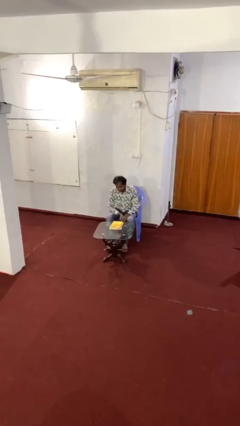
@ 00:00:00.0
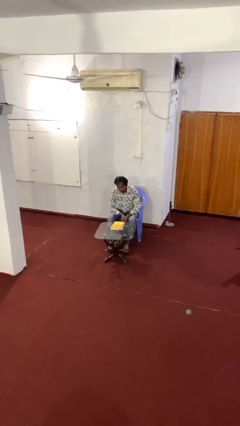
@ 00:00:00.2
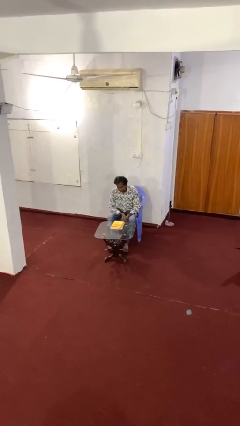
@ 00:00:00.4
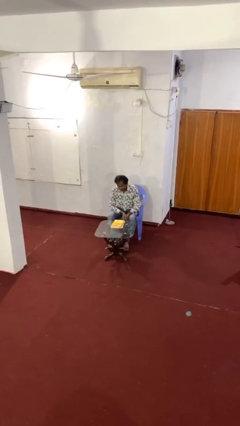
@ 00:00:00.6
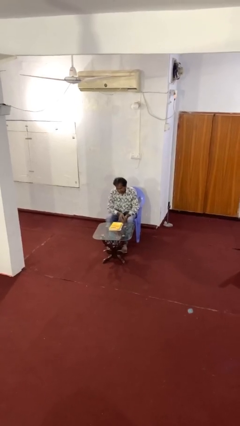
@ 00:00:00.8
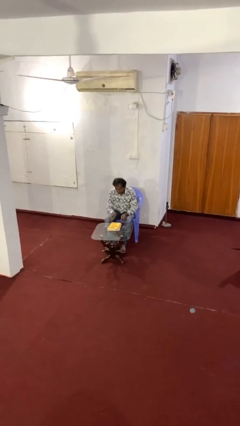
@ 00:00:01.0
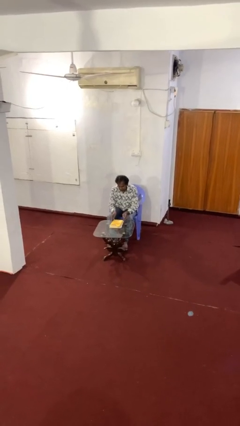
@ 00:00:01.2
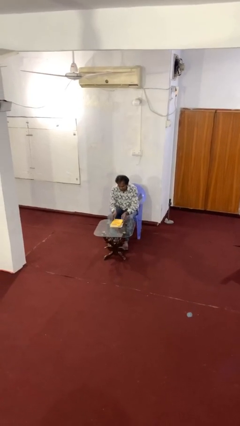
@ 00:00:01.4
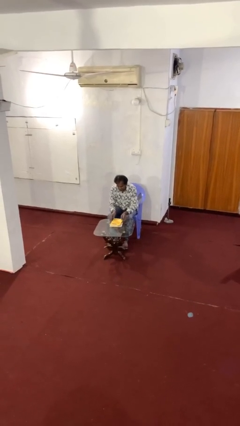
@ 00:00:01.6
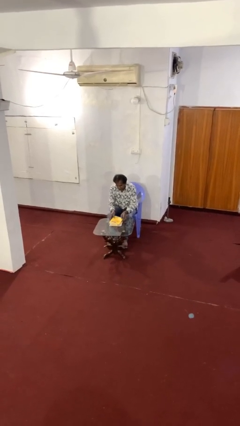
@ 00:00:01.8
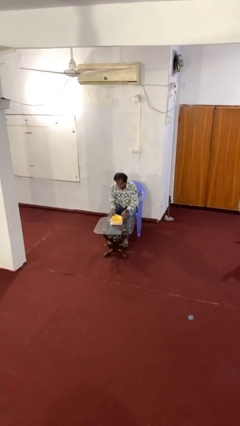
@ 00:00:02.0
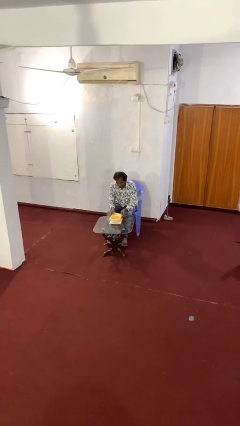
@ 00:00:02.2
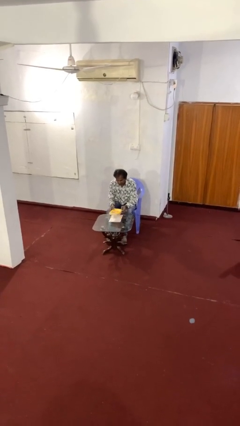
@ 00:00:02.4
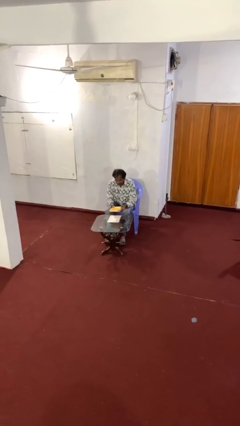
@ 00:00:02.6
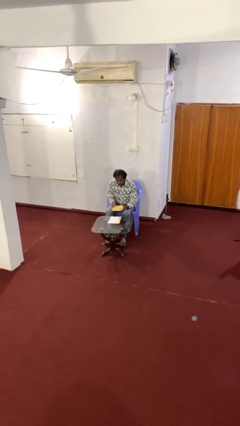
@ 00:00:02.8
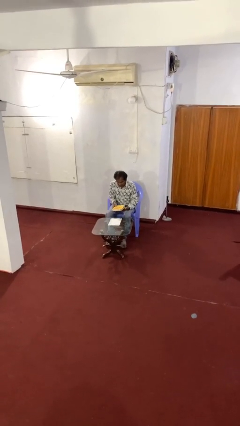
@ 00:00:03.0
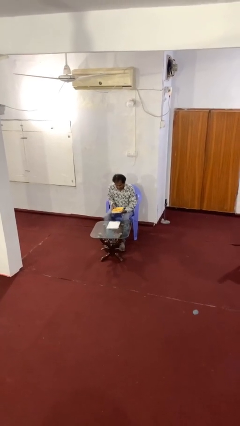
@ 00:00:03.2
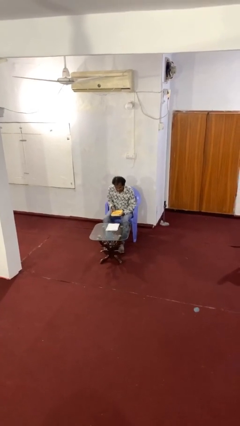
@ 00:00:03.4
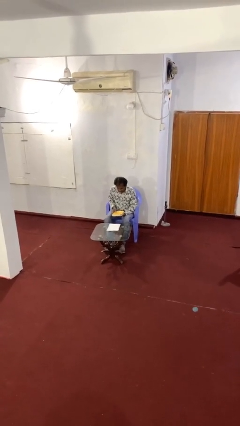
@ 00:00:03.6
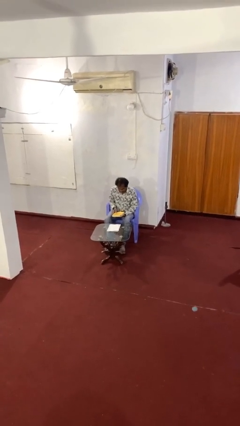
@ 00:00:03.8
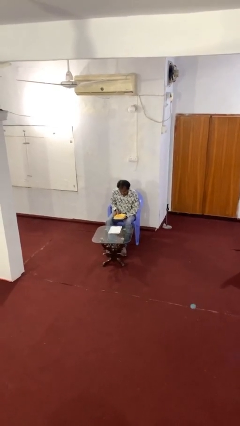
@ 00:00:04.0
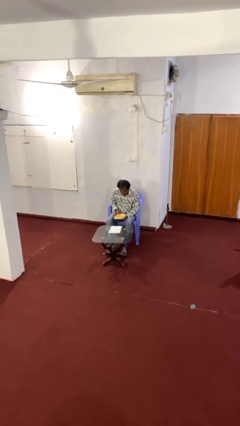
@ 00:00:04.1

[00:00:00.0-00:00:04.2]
person picks up object from table

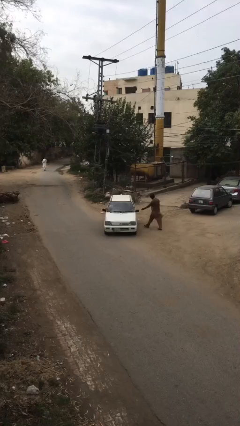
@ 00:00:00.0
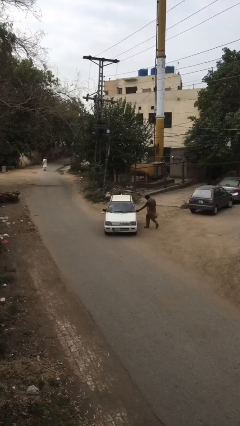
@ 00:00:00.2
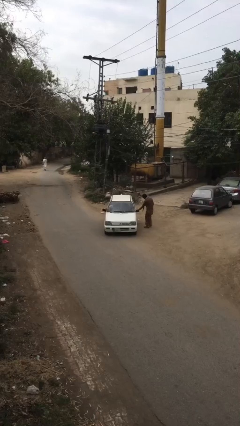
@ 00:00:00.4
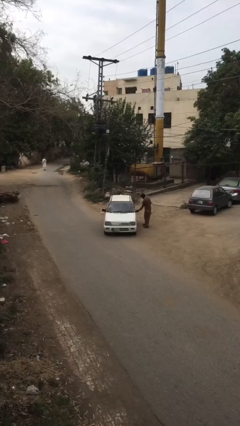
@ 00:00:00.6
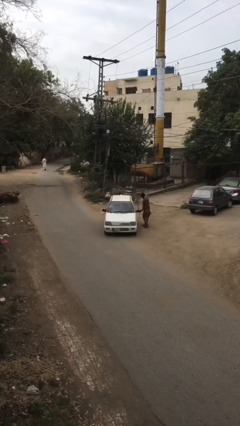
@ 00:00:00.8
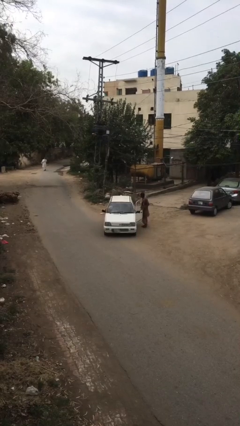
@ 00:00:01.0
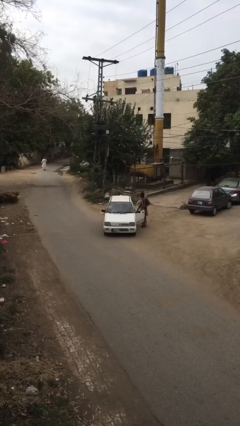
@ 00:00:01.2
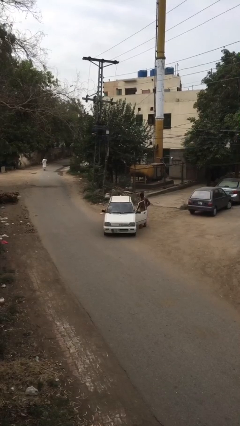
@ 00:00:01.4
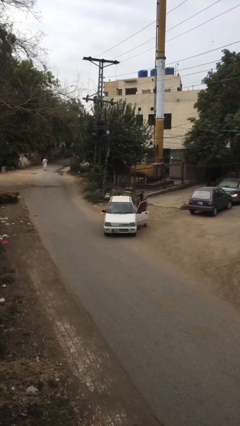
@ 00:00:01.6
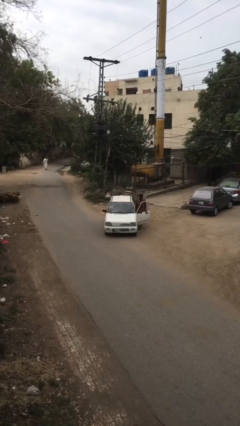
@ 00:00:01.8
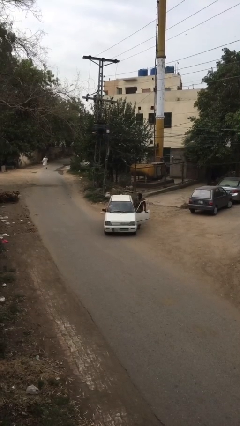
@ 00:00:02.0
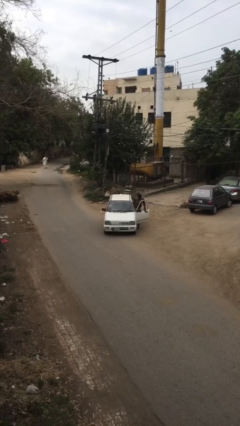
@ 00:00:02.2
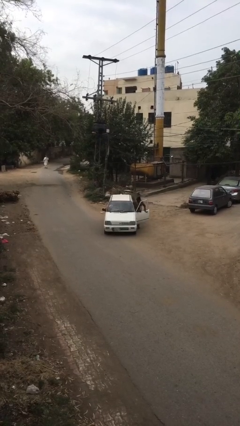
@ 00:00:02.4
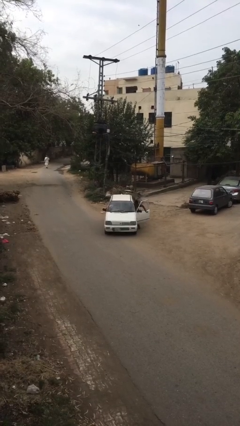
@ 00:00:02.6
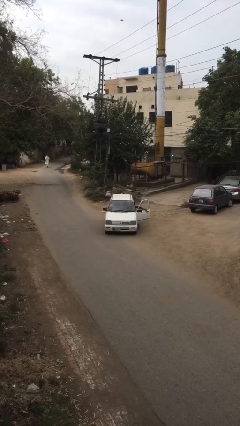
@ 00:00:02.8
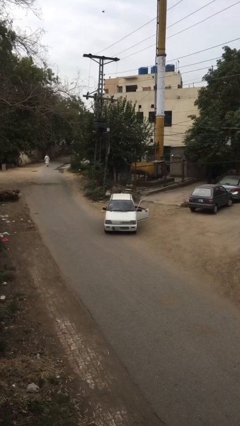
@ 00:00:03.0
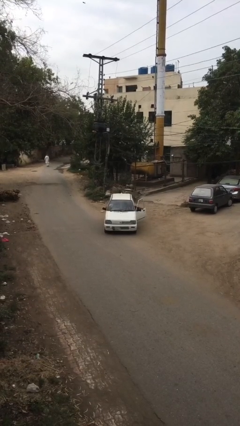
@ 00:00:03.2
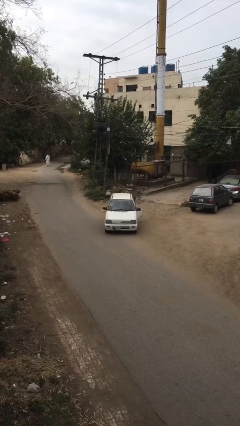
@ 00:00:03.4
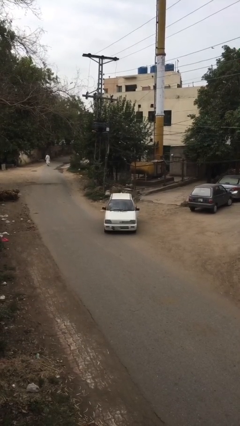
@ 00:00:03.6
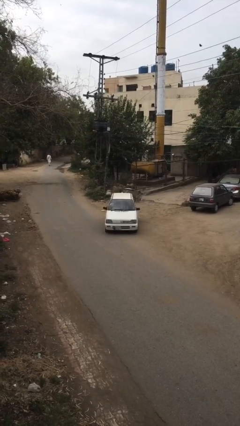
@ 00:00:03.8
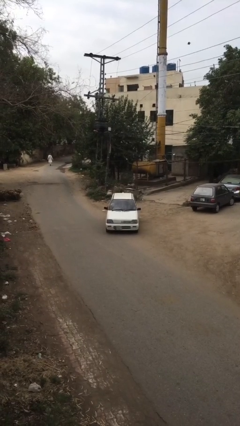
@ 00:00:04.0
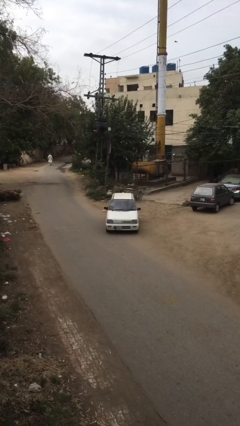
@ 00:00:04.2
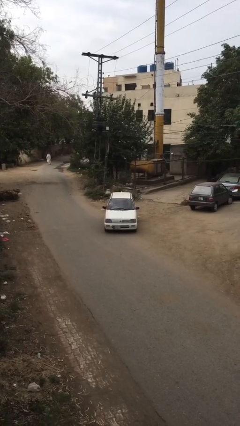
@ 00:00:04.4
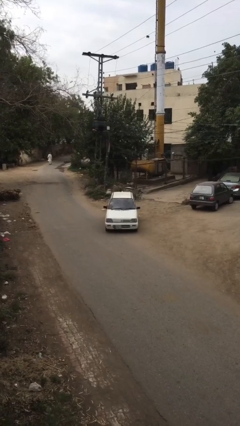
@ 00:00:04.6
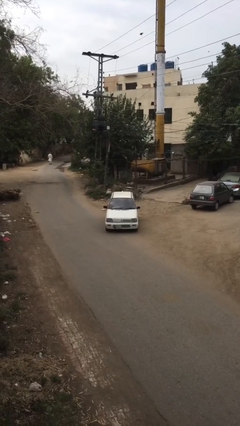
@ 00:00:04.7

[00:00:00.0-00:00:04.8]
car picks up person

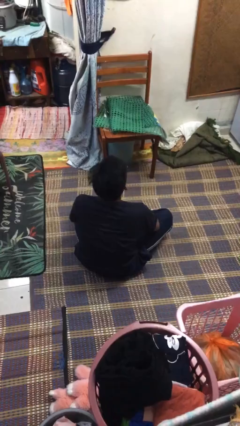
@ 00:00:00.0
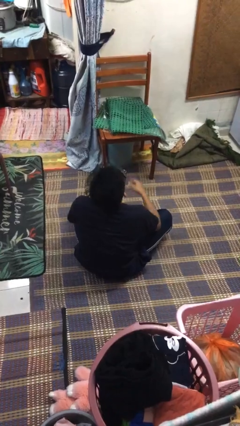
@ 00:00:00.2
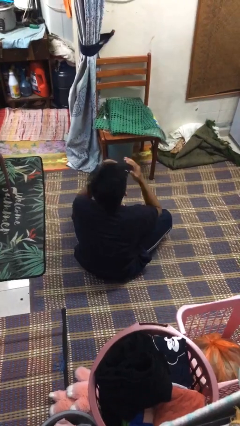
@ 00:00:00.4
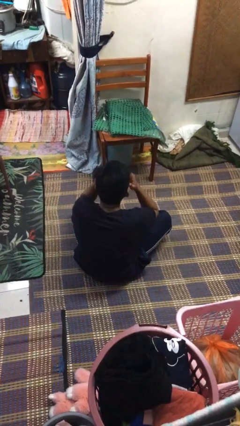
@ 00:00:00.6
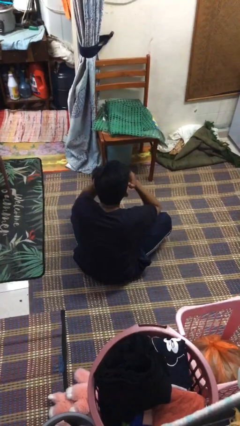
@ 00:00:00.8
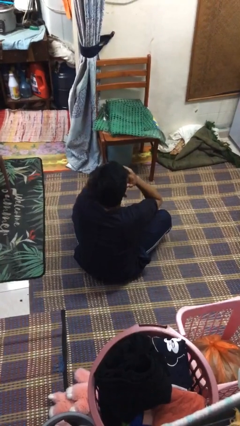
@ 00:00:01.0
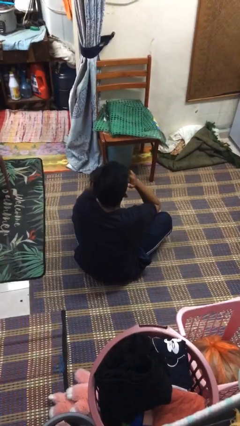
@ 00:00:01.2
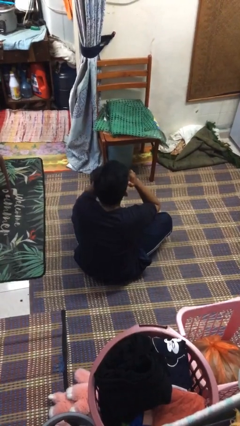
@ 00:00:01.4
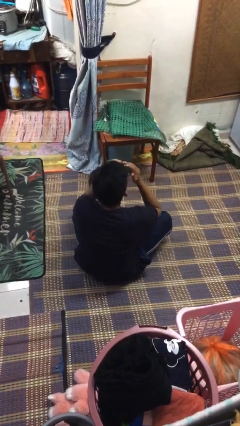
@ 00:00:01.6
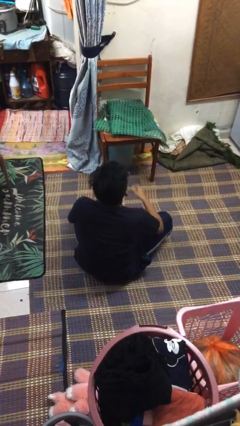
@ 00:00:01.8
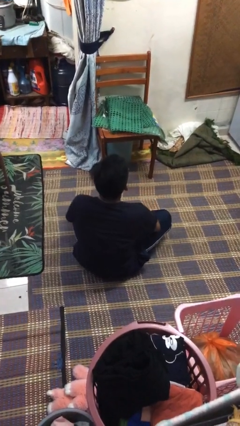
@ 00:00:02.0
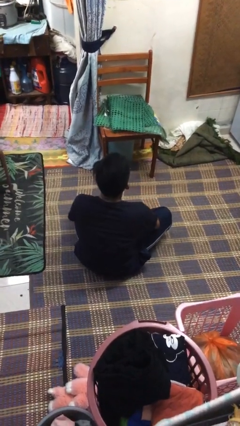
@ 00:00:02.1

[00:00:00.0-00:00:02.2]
person covers face with hands

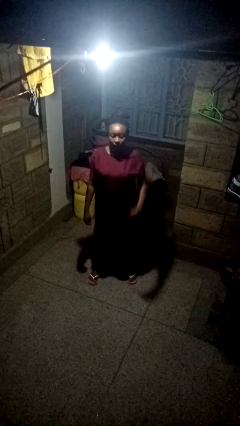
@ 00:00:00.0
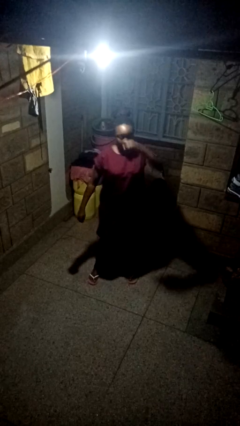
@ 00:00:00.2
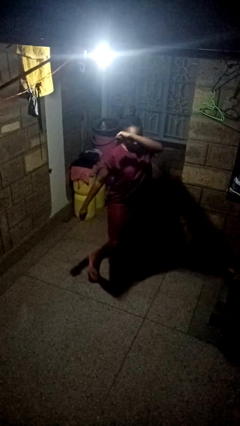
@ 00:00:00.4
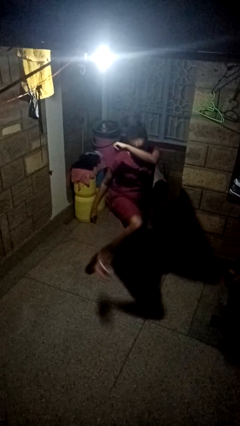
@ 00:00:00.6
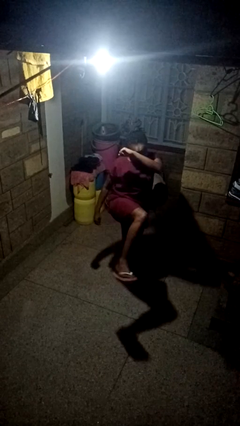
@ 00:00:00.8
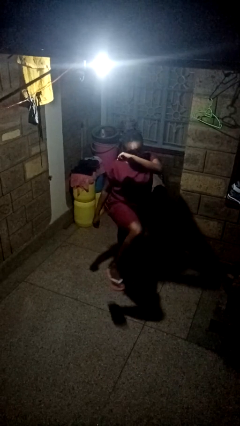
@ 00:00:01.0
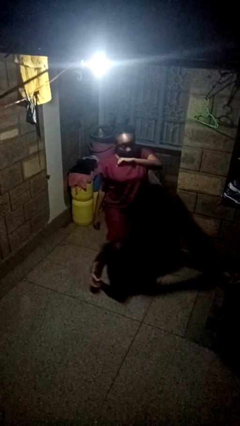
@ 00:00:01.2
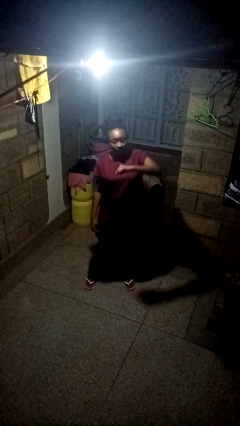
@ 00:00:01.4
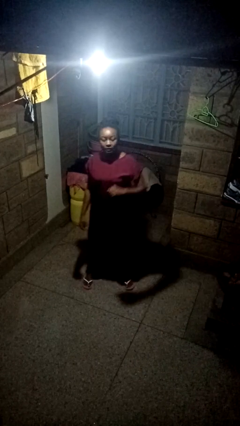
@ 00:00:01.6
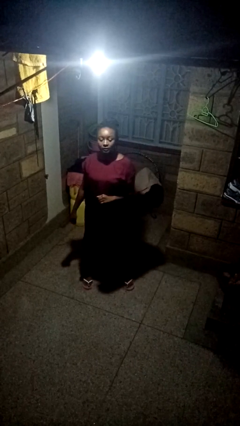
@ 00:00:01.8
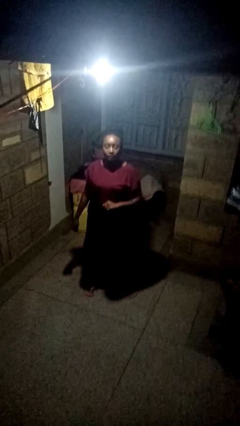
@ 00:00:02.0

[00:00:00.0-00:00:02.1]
person karate kicks

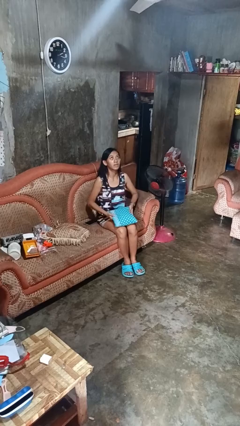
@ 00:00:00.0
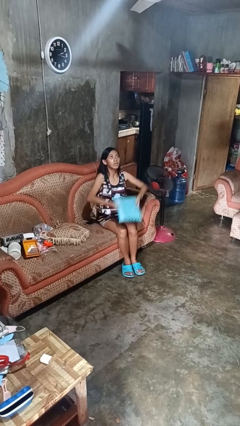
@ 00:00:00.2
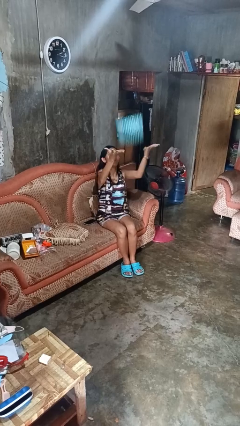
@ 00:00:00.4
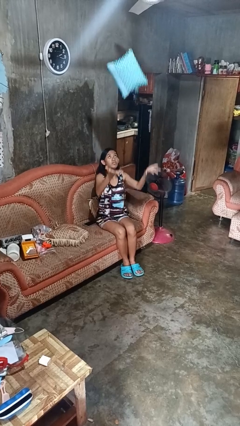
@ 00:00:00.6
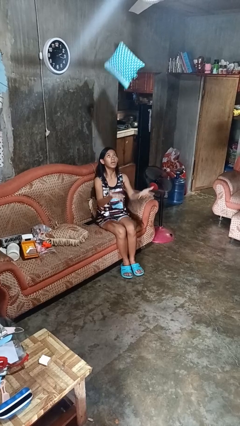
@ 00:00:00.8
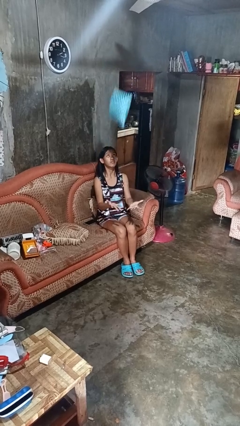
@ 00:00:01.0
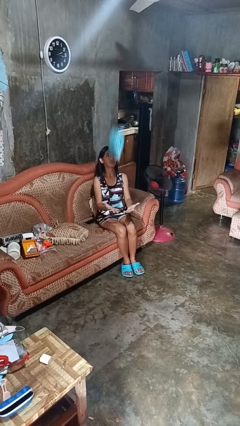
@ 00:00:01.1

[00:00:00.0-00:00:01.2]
person drops object

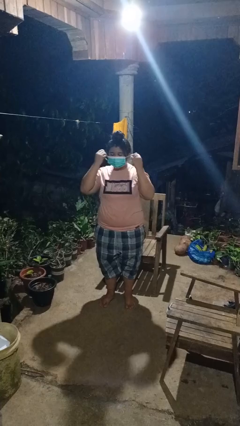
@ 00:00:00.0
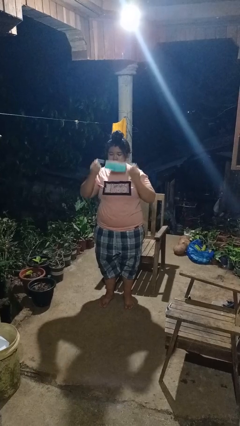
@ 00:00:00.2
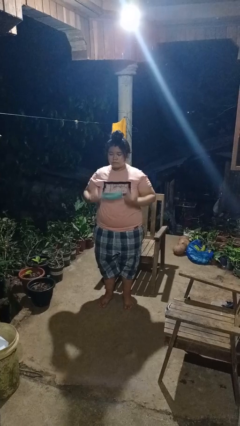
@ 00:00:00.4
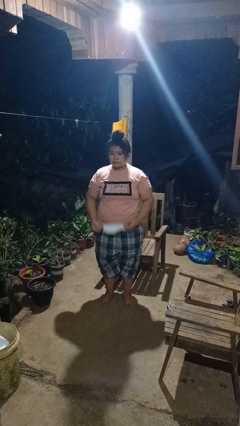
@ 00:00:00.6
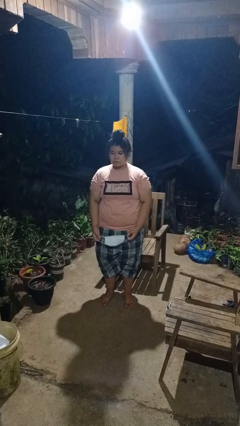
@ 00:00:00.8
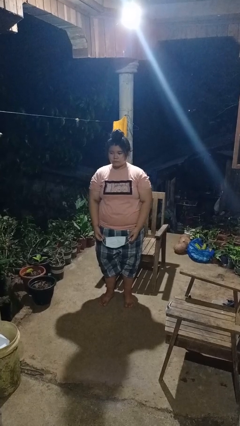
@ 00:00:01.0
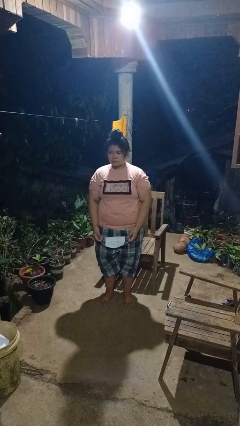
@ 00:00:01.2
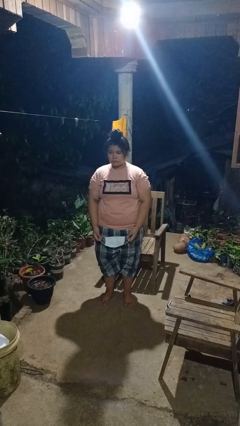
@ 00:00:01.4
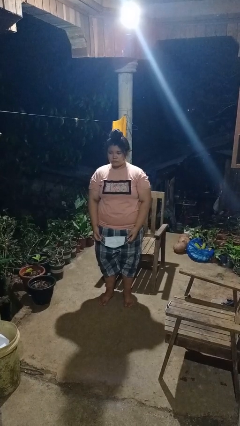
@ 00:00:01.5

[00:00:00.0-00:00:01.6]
person takes off facemask

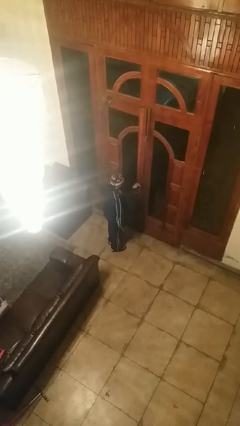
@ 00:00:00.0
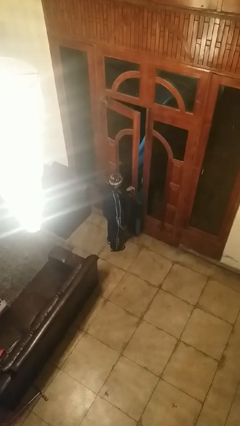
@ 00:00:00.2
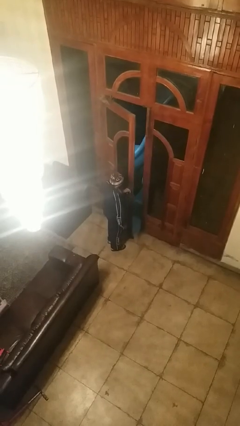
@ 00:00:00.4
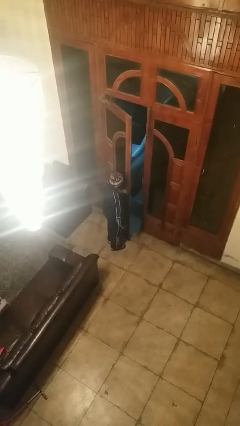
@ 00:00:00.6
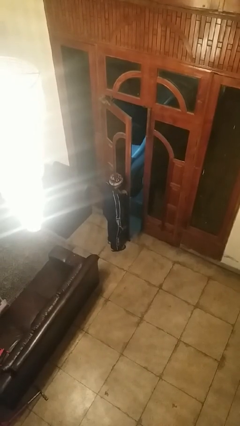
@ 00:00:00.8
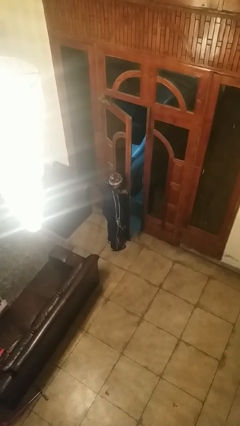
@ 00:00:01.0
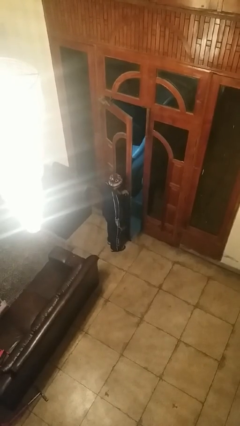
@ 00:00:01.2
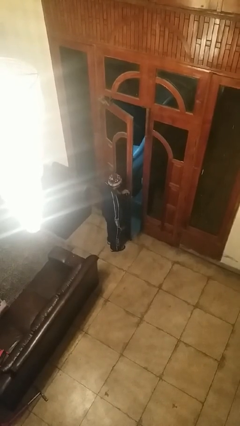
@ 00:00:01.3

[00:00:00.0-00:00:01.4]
person opens facility door
